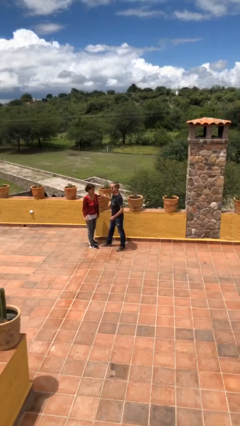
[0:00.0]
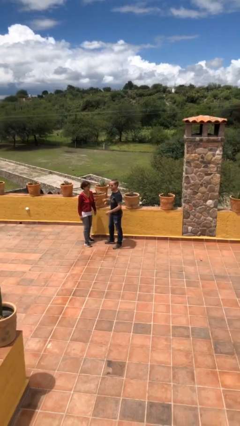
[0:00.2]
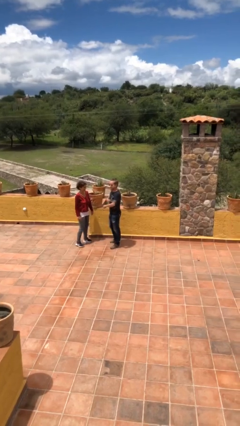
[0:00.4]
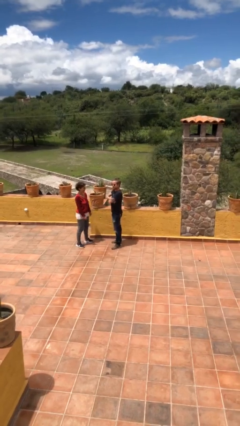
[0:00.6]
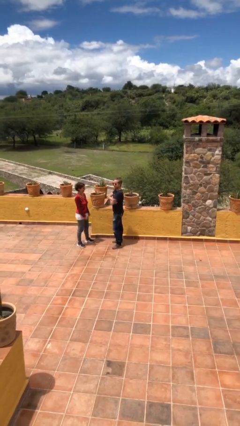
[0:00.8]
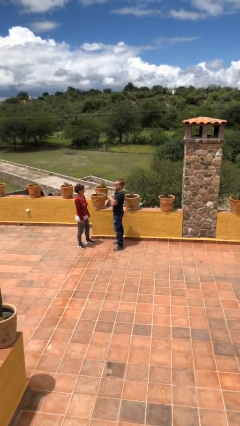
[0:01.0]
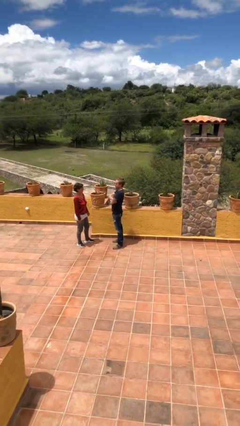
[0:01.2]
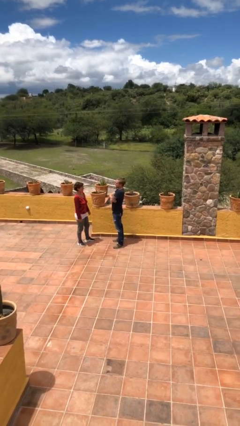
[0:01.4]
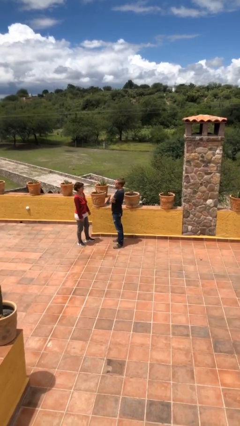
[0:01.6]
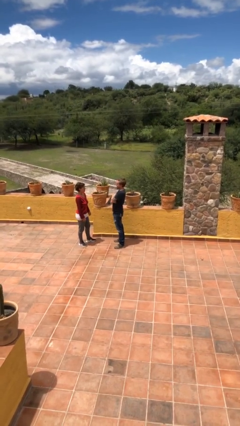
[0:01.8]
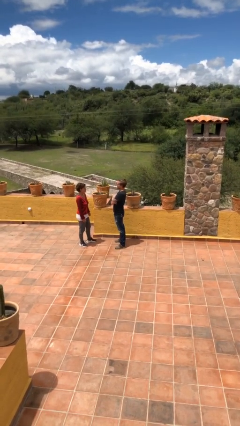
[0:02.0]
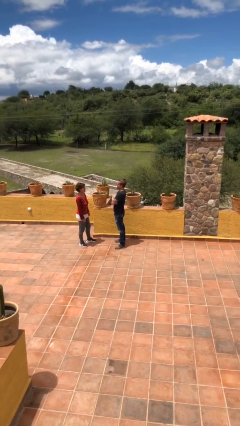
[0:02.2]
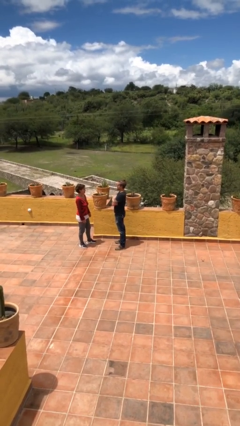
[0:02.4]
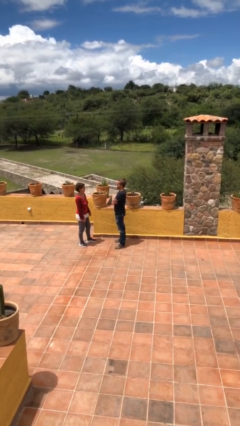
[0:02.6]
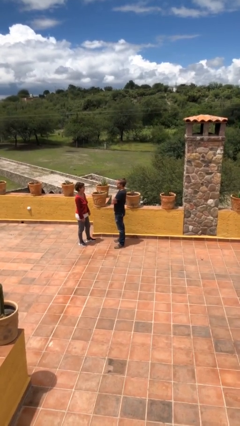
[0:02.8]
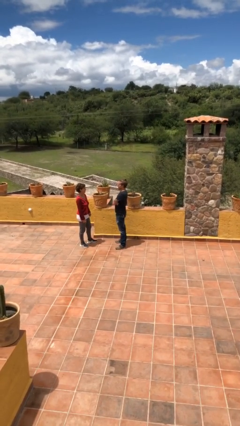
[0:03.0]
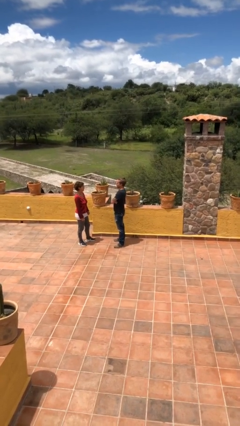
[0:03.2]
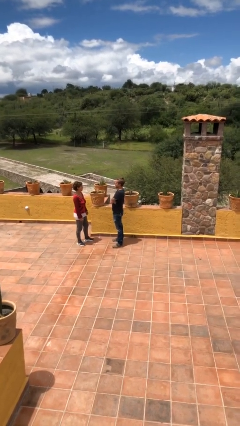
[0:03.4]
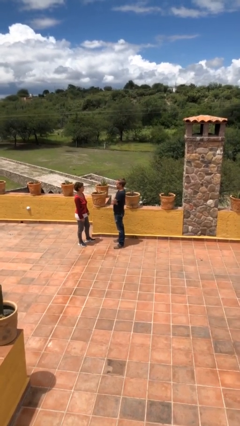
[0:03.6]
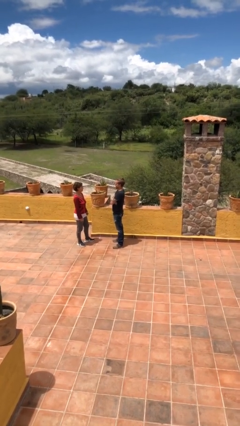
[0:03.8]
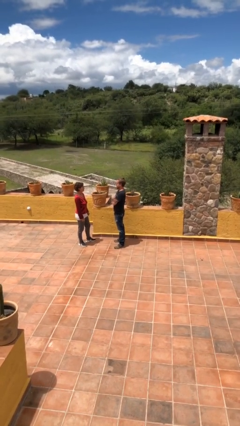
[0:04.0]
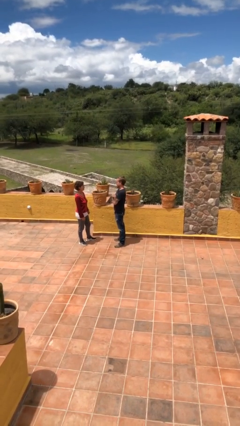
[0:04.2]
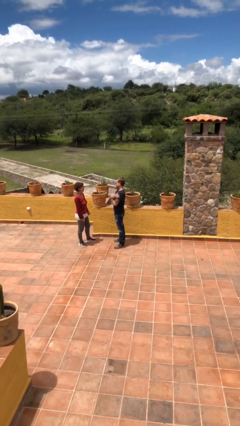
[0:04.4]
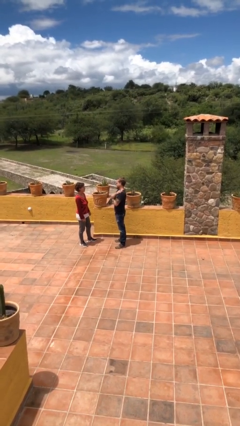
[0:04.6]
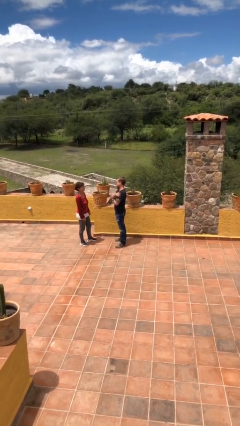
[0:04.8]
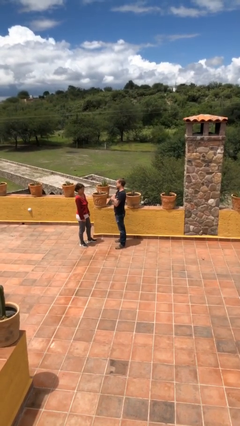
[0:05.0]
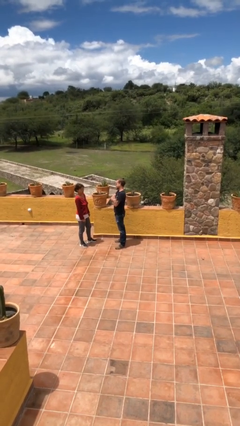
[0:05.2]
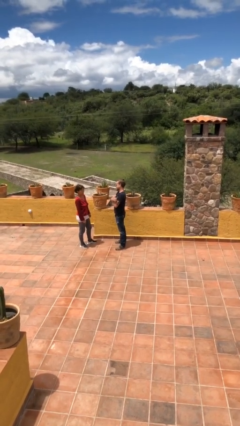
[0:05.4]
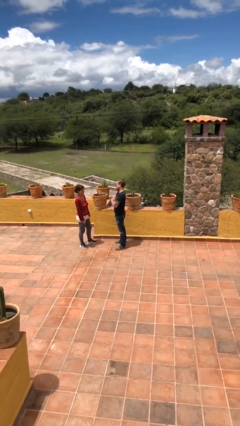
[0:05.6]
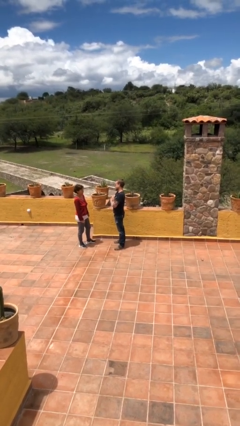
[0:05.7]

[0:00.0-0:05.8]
person talks to person

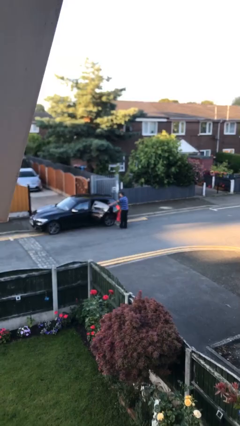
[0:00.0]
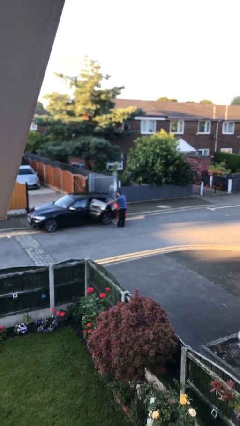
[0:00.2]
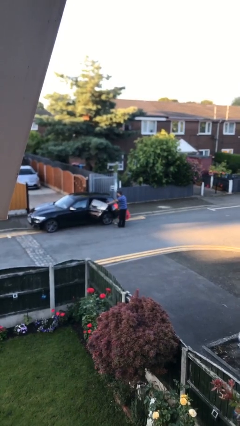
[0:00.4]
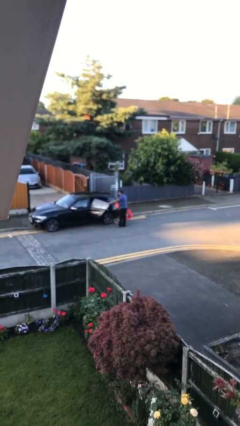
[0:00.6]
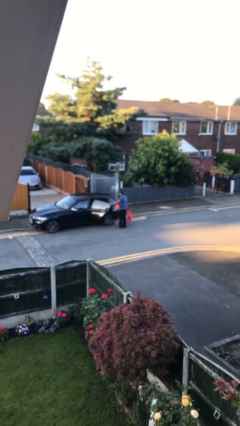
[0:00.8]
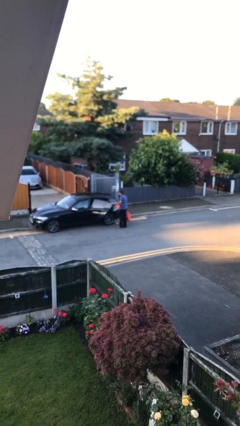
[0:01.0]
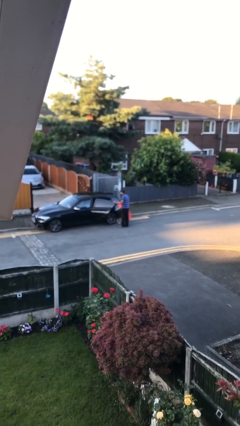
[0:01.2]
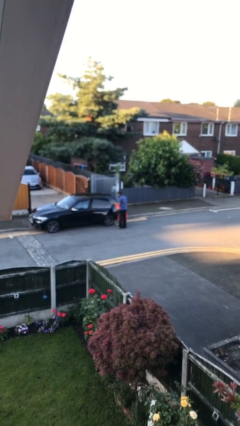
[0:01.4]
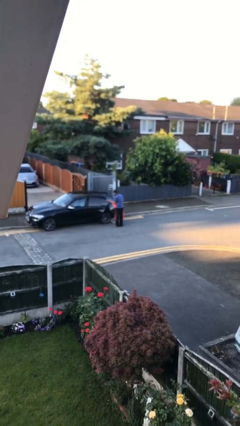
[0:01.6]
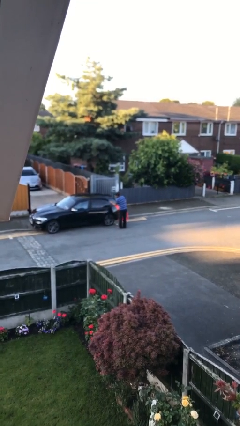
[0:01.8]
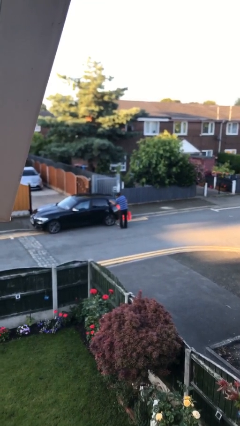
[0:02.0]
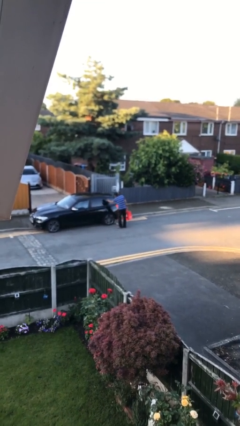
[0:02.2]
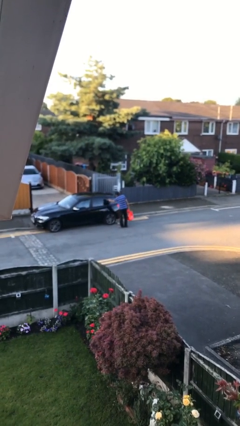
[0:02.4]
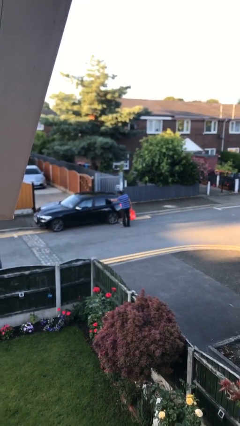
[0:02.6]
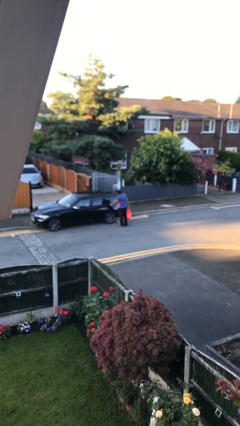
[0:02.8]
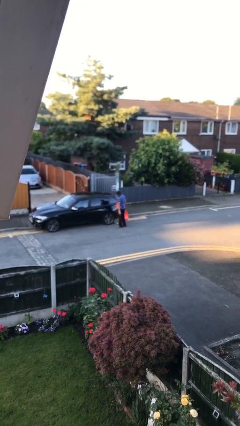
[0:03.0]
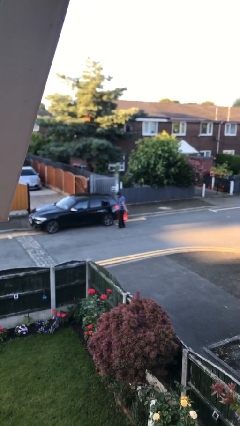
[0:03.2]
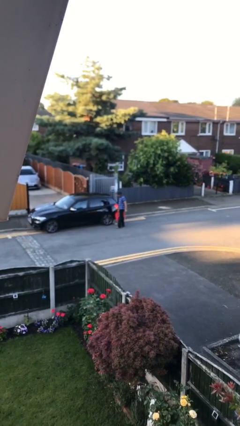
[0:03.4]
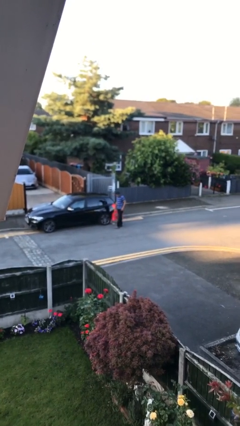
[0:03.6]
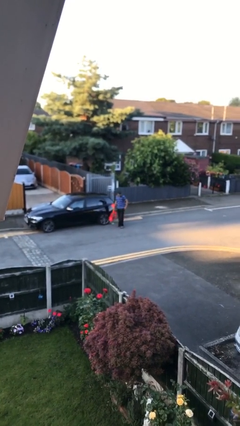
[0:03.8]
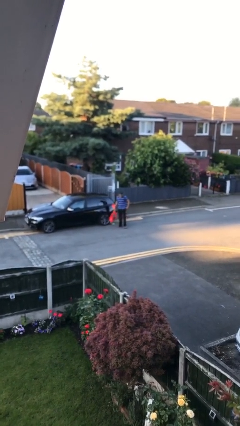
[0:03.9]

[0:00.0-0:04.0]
person closes car door

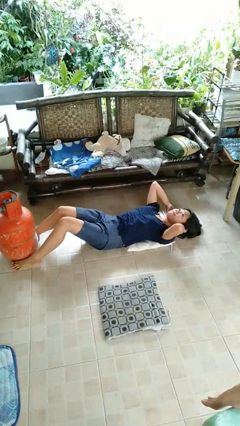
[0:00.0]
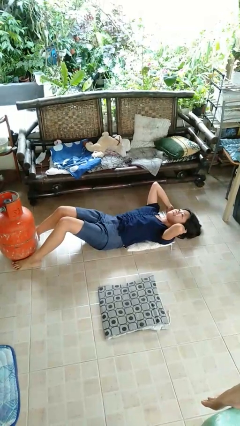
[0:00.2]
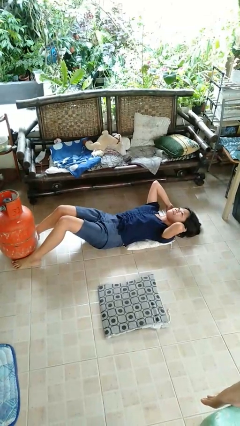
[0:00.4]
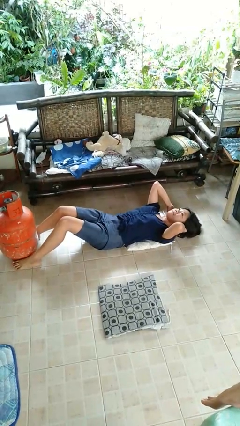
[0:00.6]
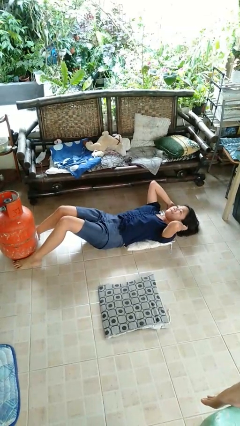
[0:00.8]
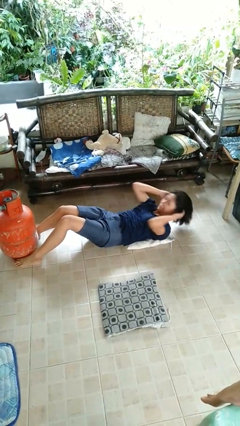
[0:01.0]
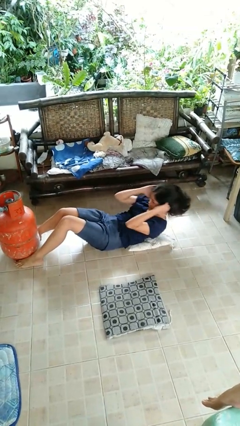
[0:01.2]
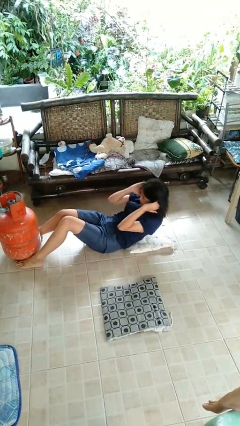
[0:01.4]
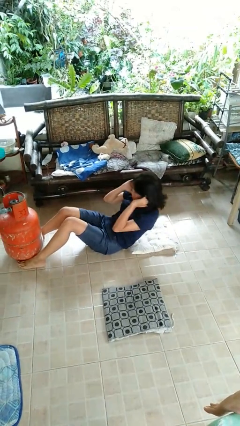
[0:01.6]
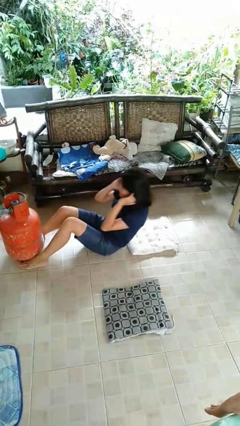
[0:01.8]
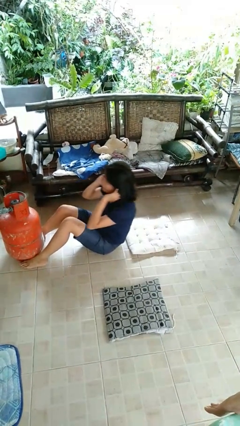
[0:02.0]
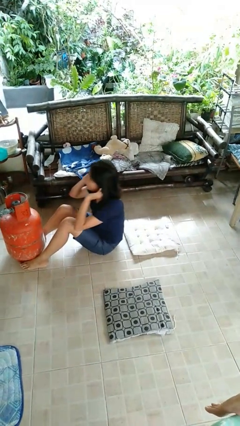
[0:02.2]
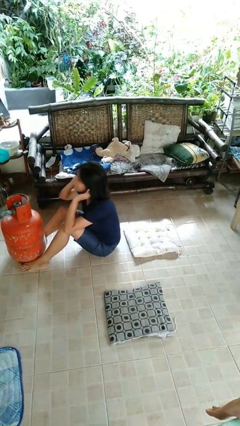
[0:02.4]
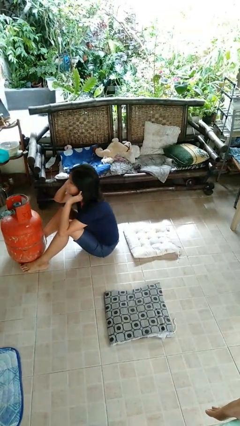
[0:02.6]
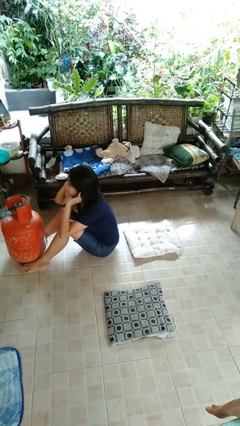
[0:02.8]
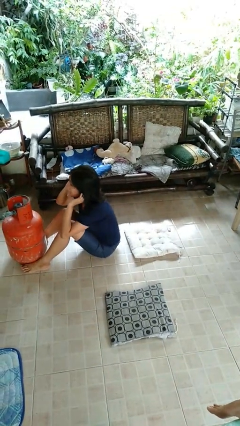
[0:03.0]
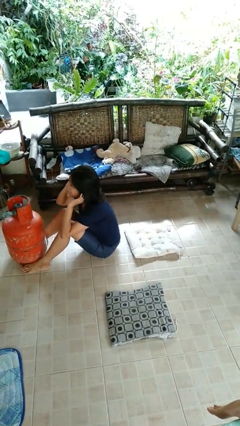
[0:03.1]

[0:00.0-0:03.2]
person exercises with situp

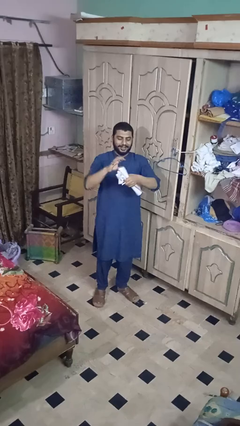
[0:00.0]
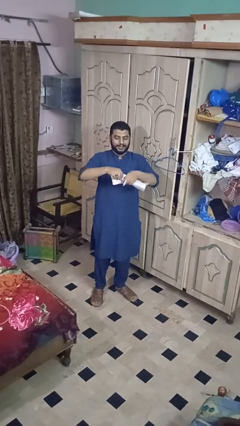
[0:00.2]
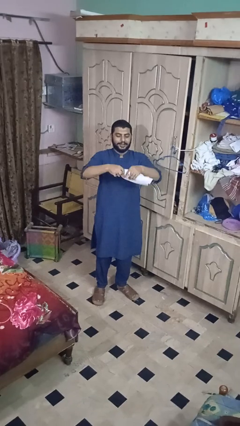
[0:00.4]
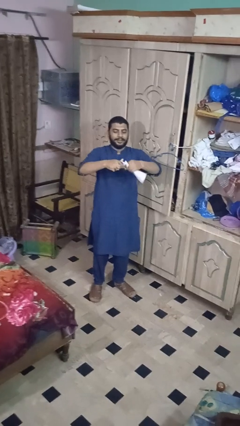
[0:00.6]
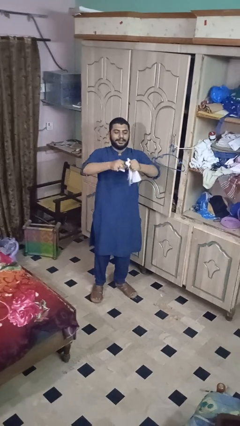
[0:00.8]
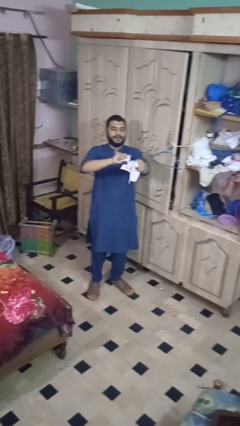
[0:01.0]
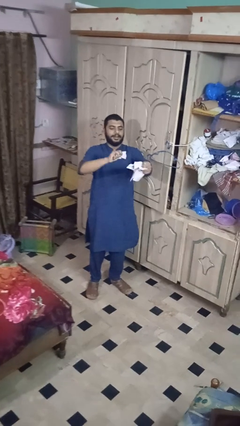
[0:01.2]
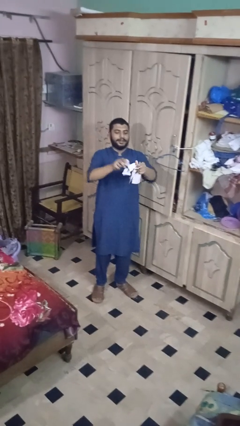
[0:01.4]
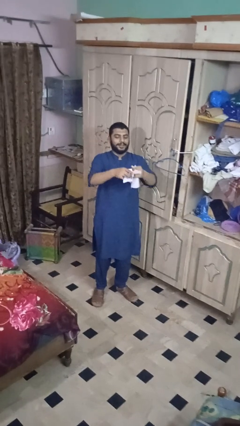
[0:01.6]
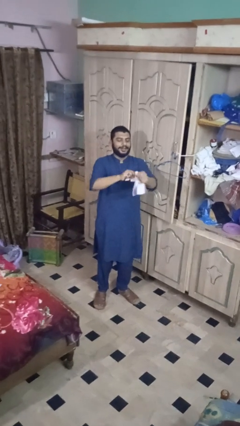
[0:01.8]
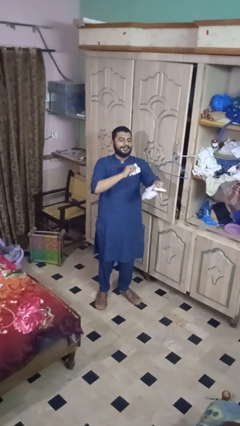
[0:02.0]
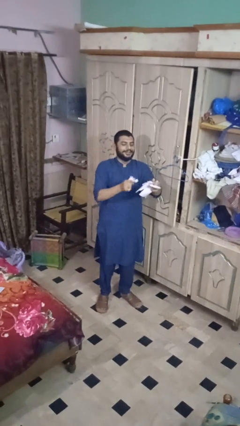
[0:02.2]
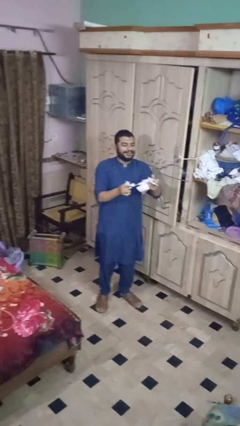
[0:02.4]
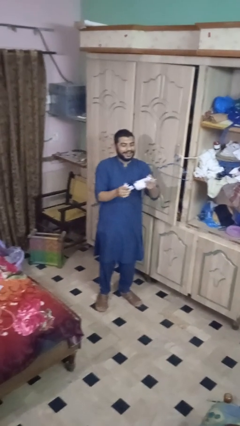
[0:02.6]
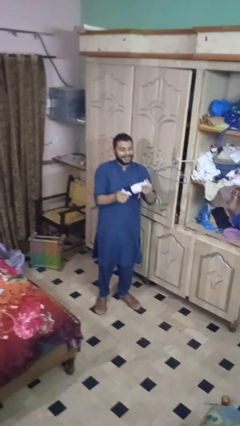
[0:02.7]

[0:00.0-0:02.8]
person tears paper

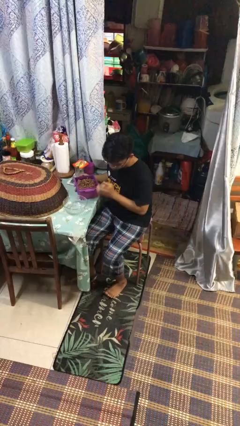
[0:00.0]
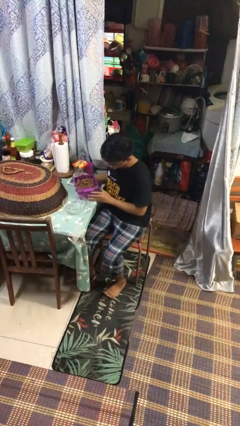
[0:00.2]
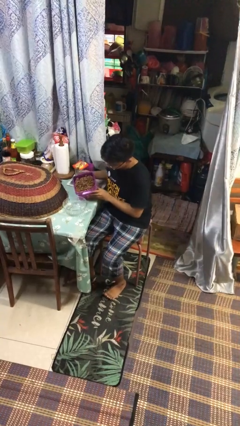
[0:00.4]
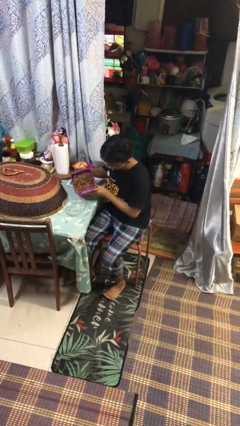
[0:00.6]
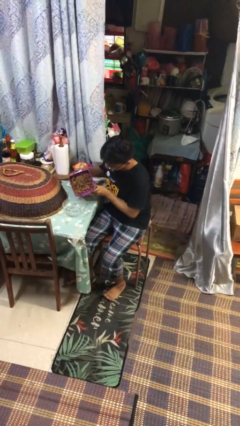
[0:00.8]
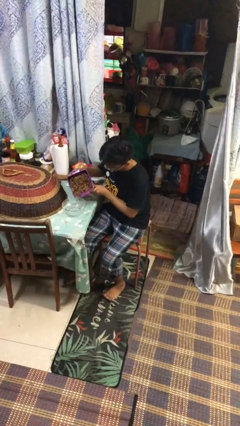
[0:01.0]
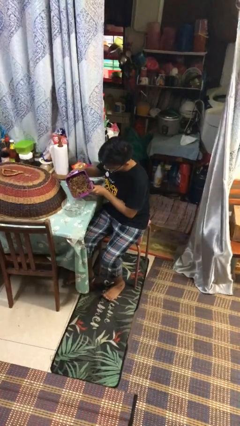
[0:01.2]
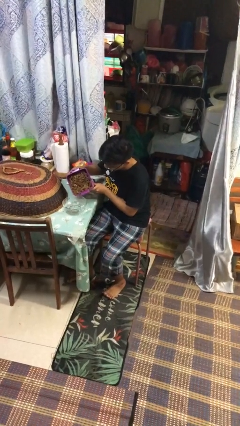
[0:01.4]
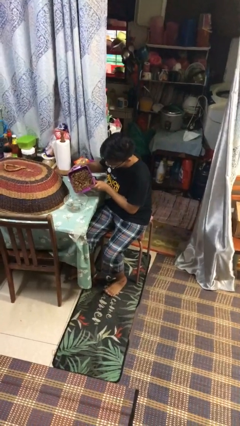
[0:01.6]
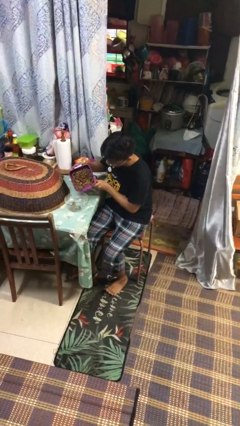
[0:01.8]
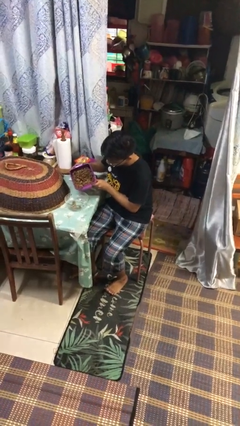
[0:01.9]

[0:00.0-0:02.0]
person pours into bowl
